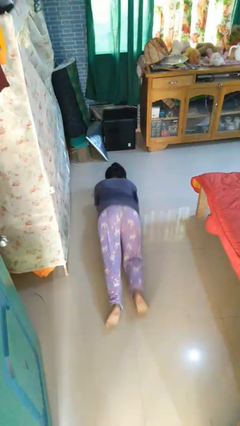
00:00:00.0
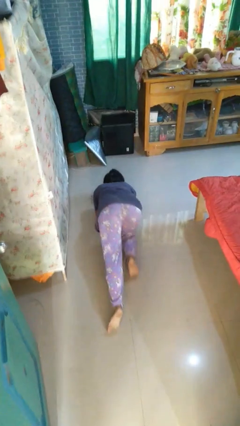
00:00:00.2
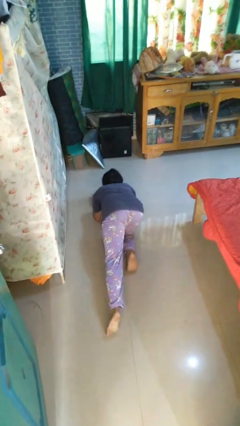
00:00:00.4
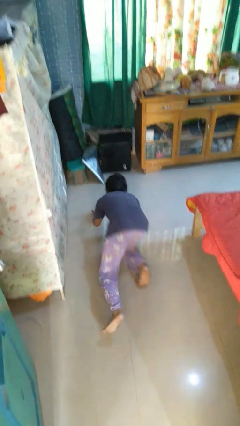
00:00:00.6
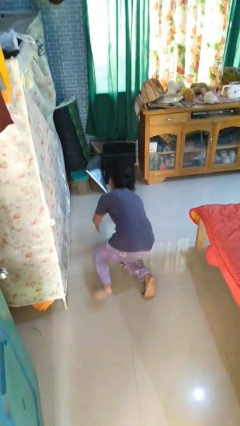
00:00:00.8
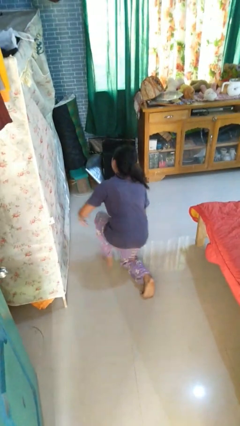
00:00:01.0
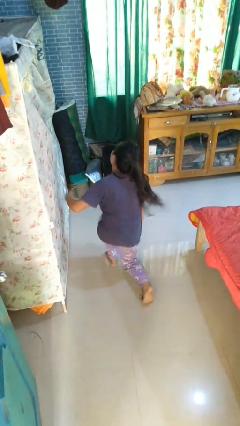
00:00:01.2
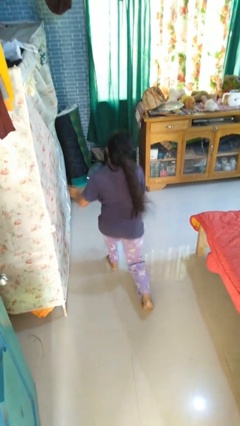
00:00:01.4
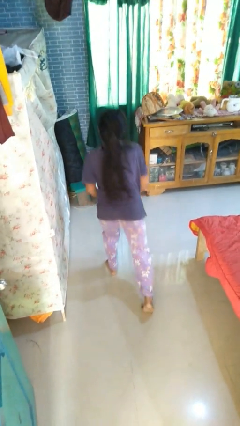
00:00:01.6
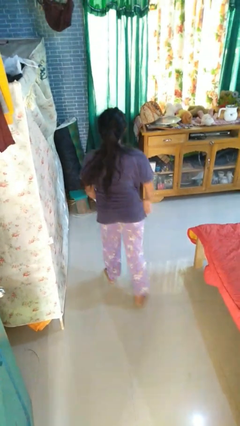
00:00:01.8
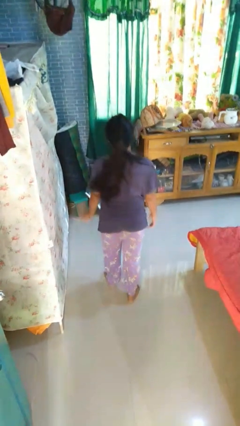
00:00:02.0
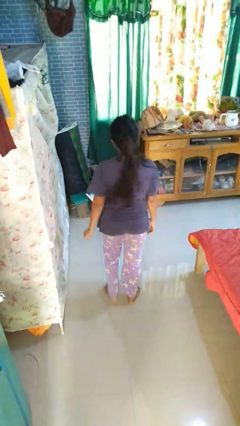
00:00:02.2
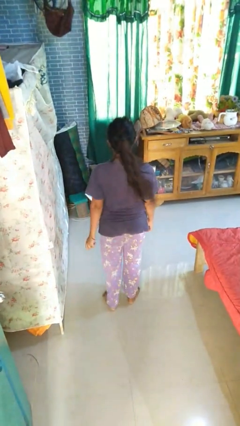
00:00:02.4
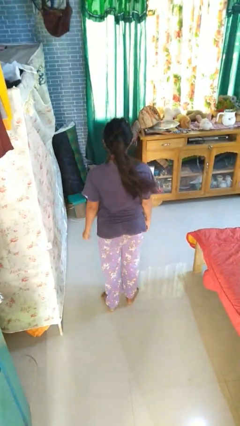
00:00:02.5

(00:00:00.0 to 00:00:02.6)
person stands up from floor

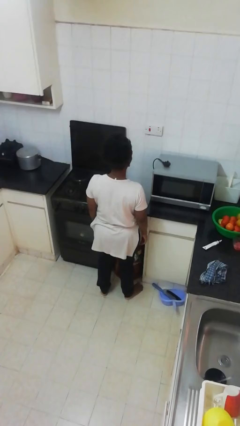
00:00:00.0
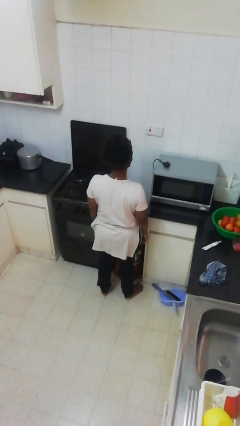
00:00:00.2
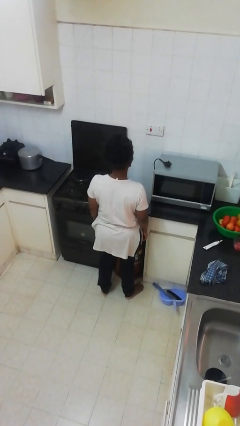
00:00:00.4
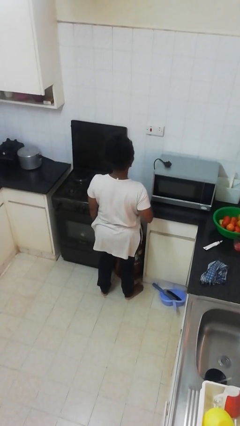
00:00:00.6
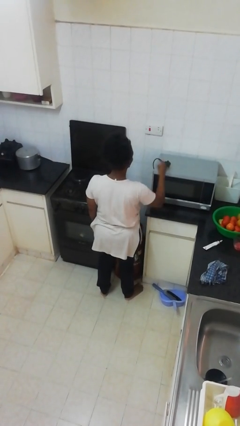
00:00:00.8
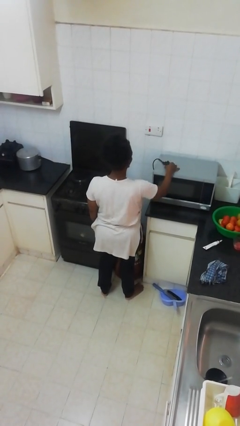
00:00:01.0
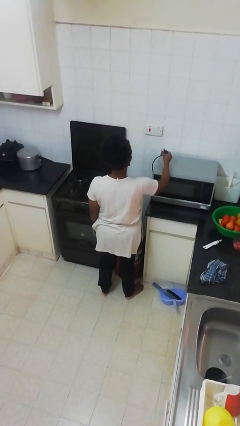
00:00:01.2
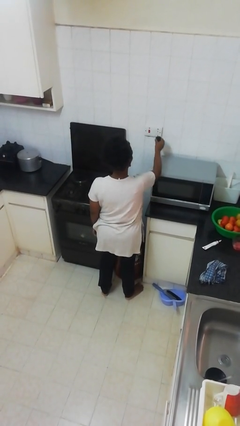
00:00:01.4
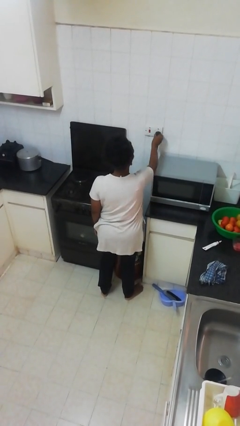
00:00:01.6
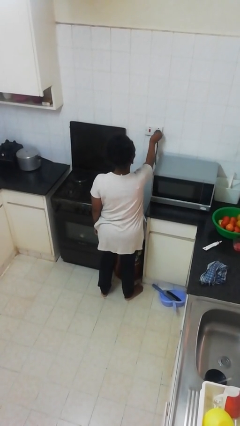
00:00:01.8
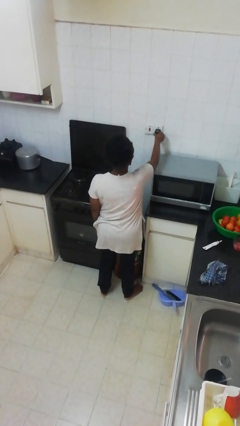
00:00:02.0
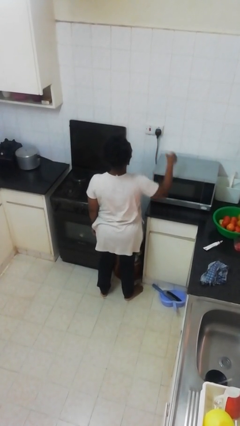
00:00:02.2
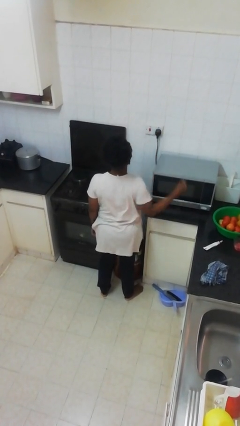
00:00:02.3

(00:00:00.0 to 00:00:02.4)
person plugs into electrical socket

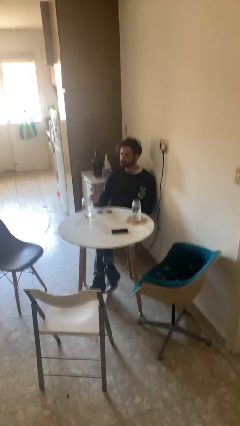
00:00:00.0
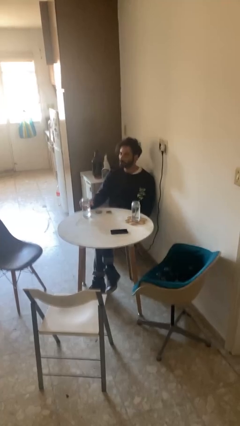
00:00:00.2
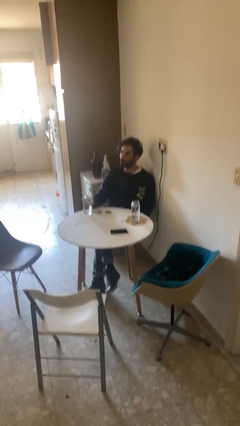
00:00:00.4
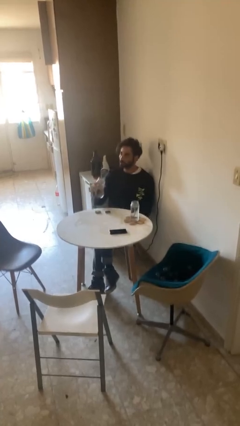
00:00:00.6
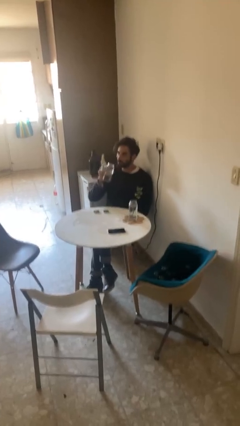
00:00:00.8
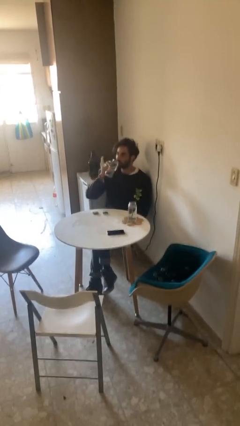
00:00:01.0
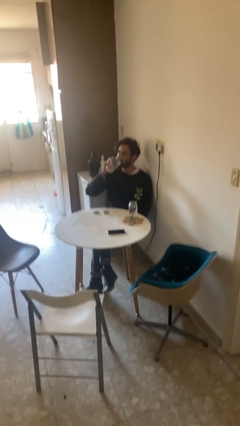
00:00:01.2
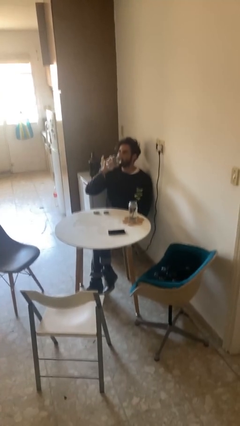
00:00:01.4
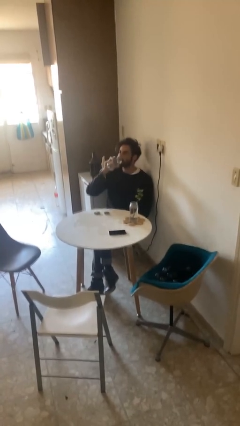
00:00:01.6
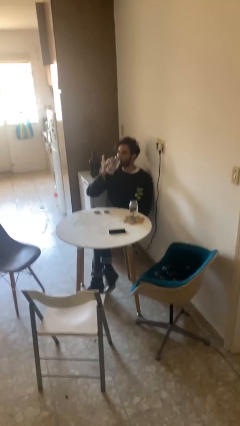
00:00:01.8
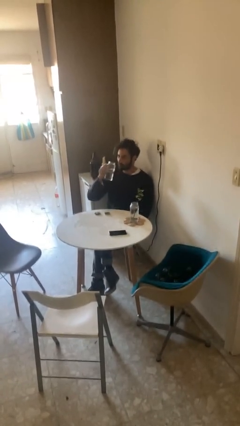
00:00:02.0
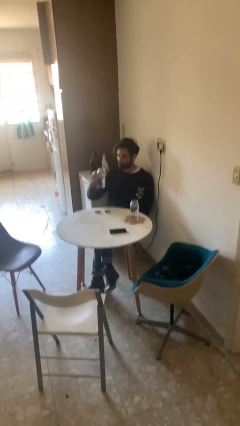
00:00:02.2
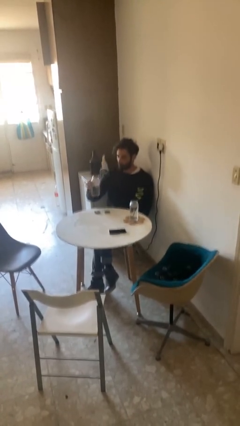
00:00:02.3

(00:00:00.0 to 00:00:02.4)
person drinks from cup

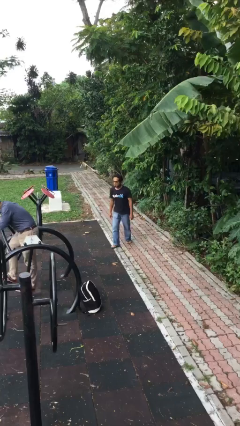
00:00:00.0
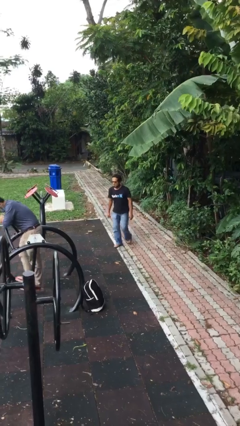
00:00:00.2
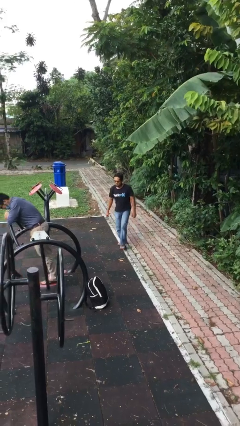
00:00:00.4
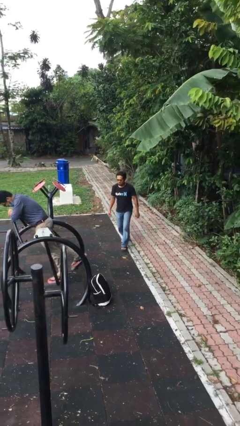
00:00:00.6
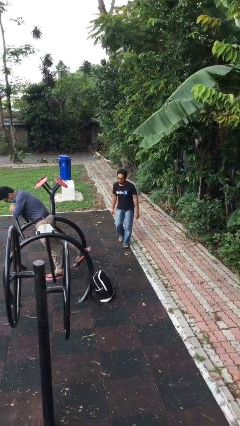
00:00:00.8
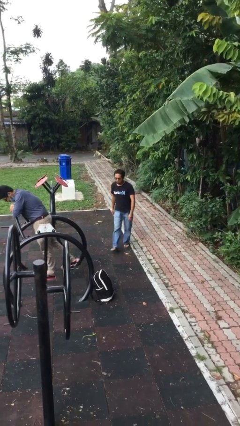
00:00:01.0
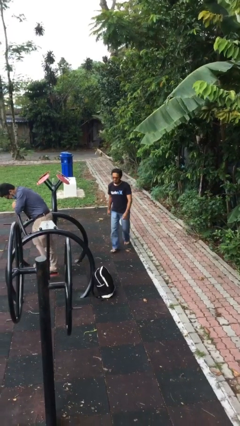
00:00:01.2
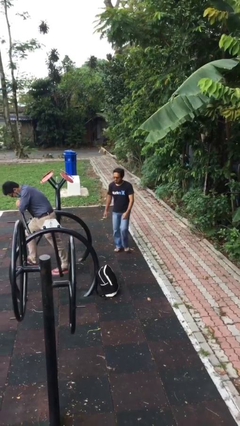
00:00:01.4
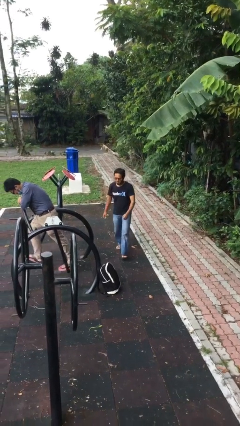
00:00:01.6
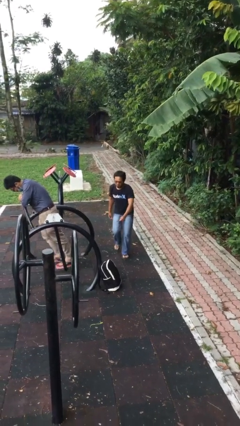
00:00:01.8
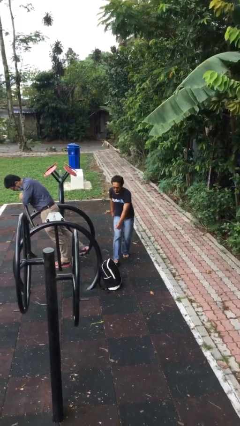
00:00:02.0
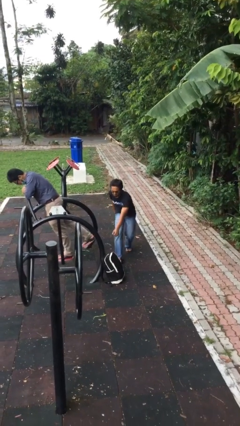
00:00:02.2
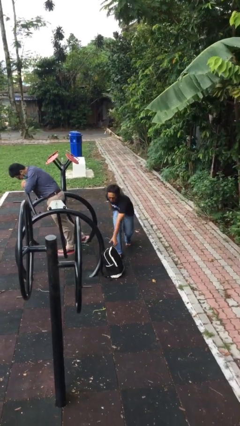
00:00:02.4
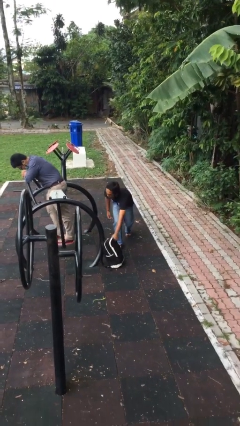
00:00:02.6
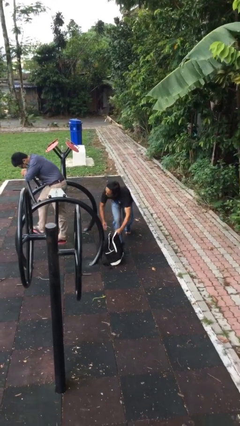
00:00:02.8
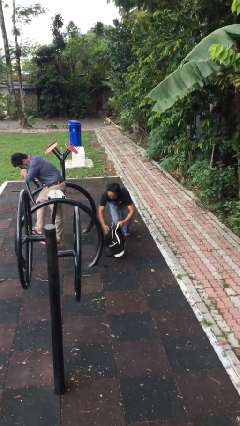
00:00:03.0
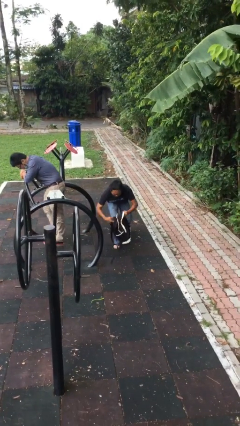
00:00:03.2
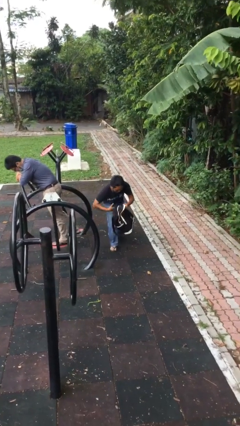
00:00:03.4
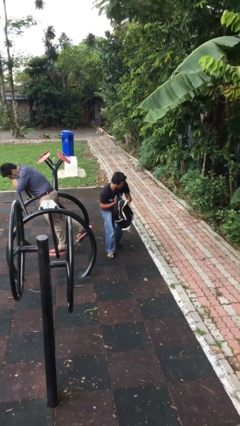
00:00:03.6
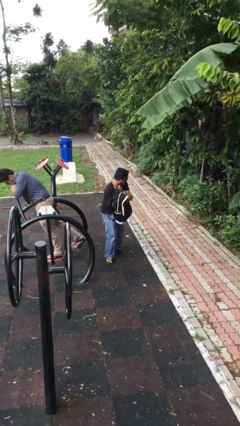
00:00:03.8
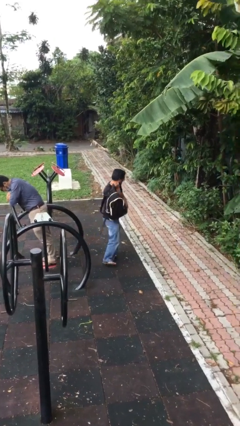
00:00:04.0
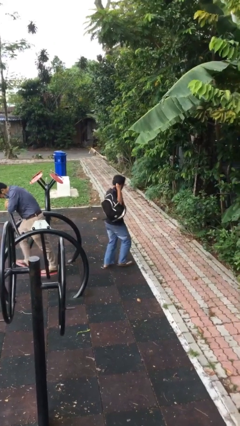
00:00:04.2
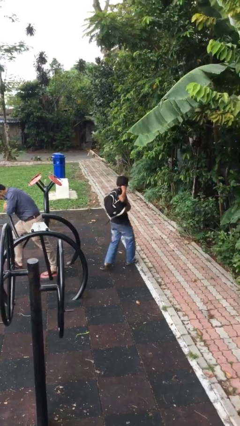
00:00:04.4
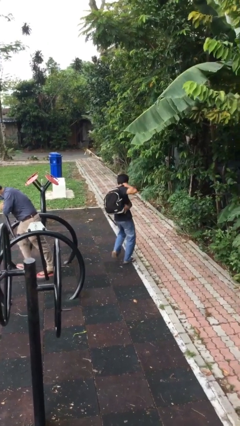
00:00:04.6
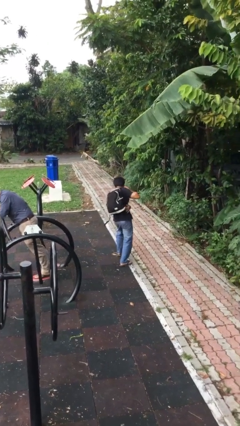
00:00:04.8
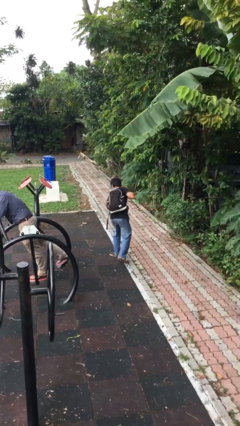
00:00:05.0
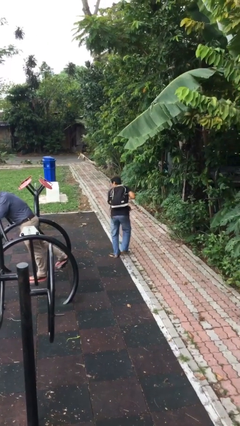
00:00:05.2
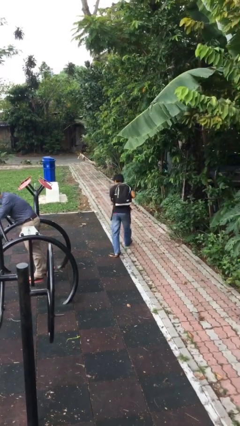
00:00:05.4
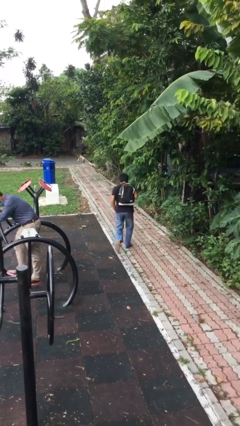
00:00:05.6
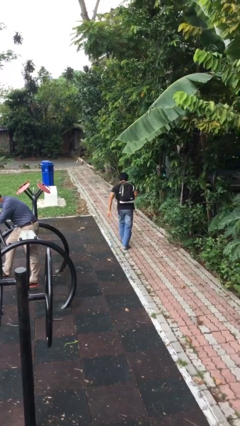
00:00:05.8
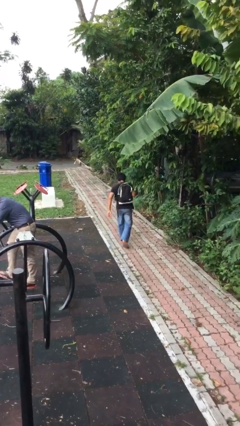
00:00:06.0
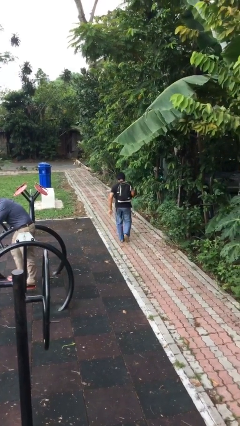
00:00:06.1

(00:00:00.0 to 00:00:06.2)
person steals object from person

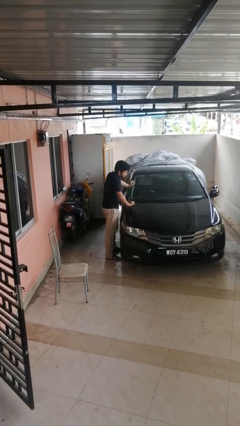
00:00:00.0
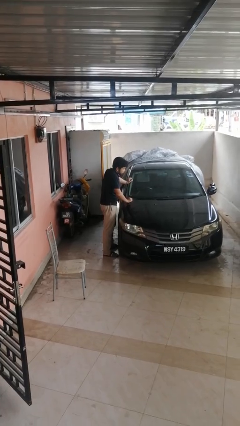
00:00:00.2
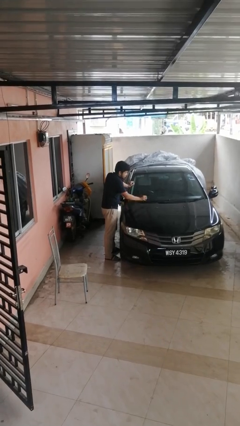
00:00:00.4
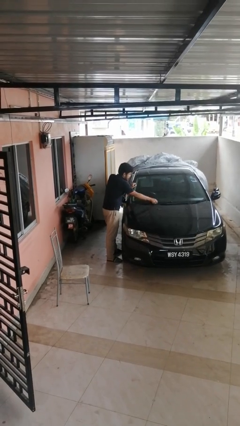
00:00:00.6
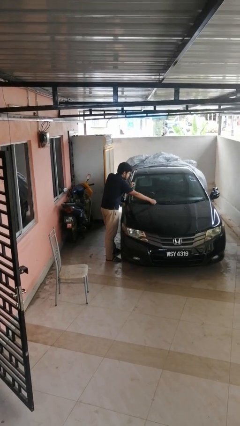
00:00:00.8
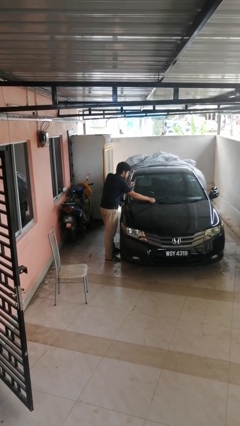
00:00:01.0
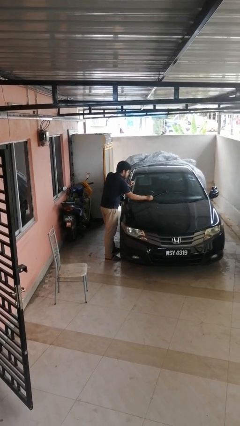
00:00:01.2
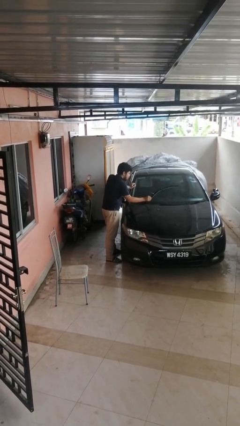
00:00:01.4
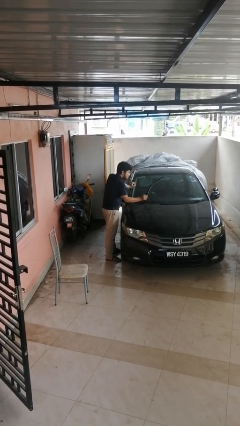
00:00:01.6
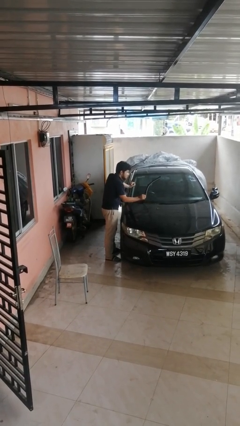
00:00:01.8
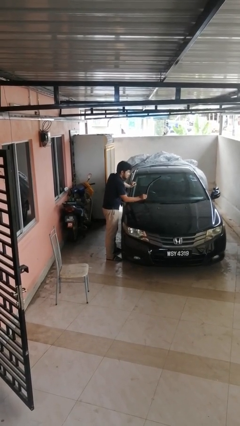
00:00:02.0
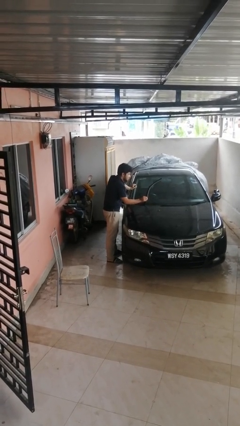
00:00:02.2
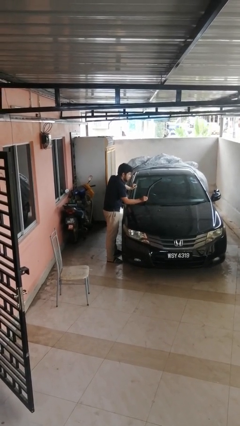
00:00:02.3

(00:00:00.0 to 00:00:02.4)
person flips up car wipers

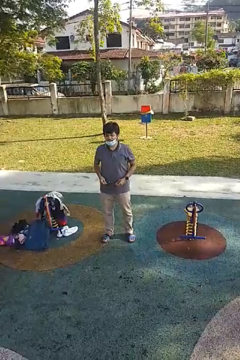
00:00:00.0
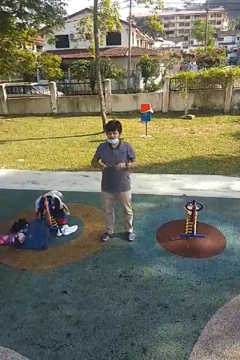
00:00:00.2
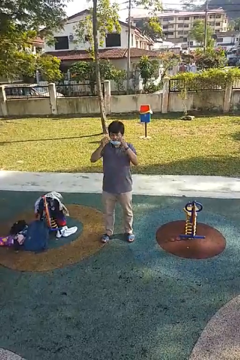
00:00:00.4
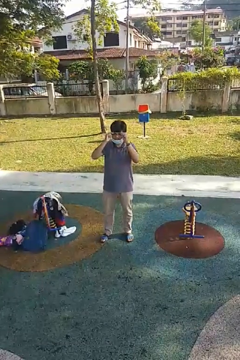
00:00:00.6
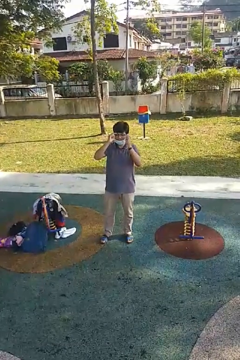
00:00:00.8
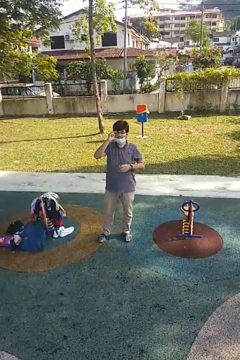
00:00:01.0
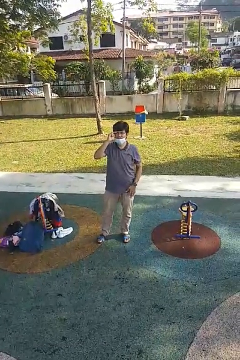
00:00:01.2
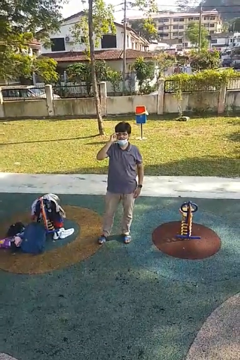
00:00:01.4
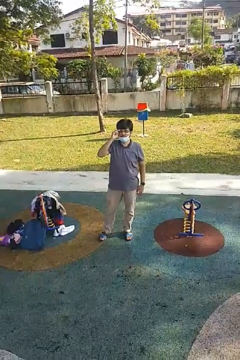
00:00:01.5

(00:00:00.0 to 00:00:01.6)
person puts on glasses

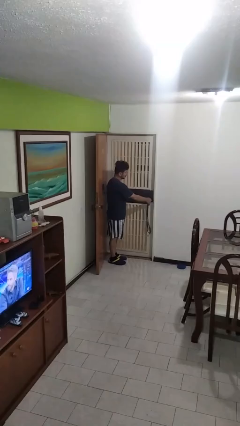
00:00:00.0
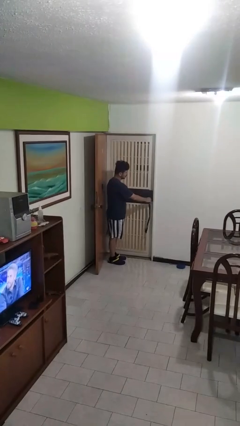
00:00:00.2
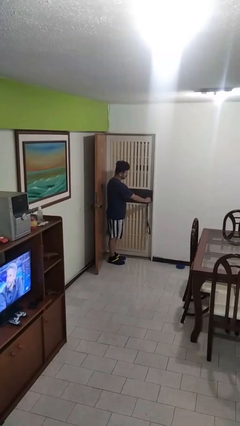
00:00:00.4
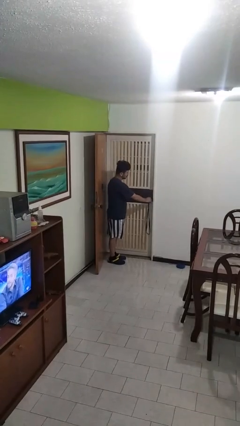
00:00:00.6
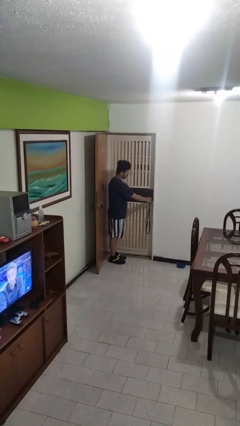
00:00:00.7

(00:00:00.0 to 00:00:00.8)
person unlocks door with keys
